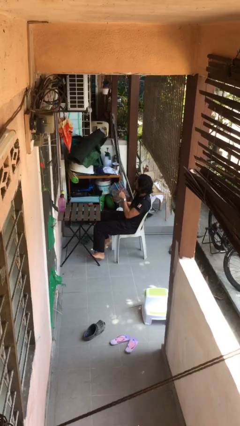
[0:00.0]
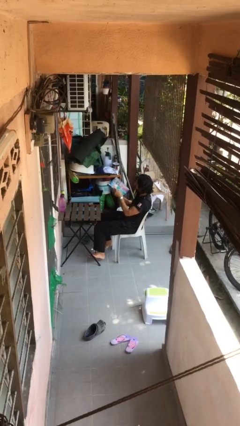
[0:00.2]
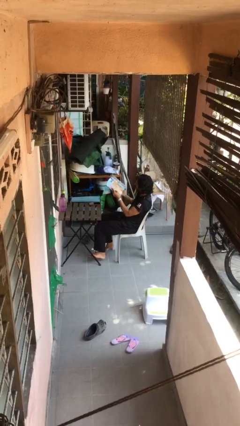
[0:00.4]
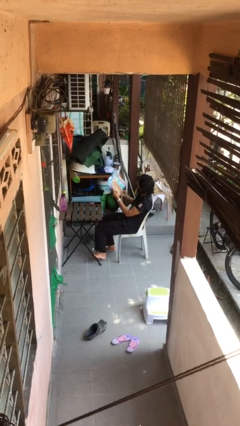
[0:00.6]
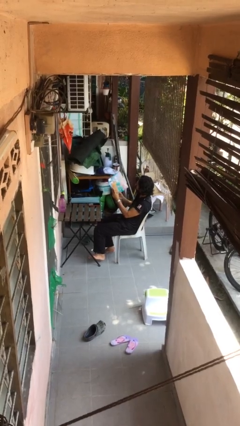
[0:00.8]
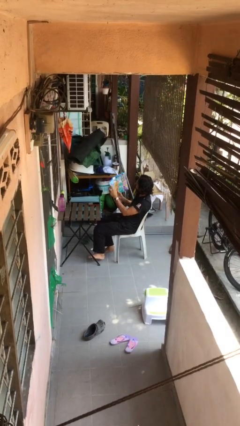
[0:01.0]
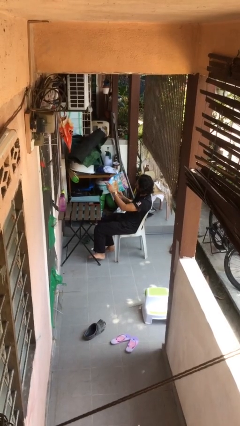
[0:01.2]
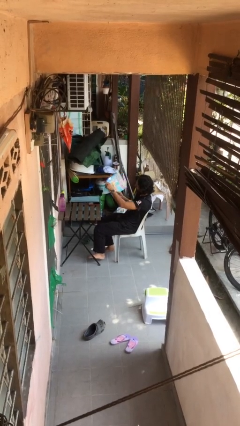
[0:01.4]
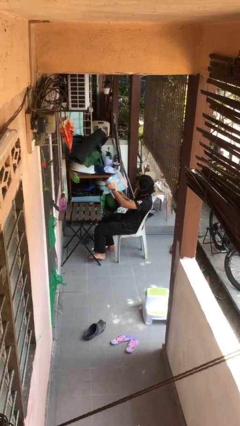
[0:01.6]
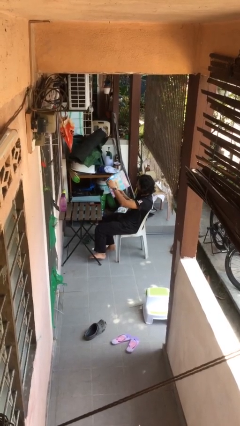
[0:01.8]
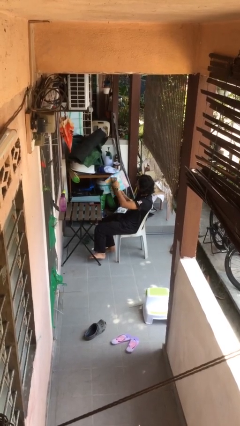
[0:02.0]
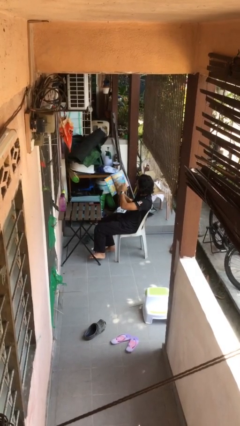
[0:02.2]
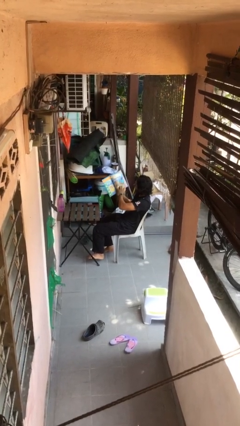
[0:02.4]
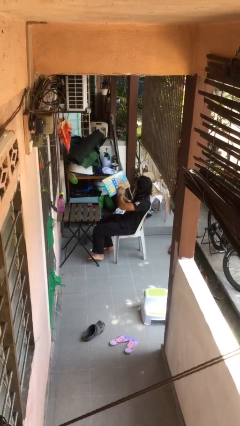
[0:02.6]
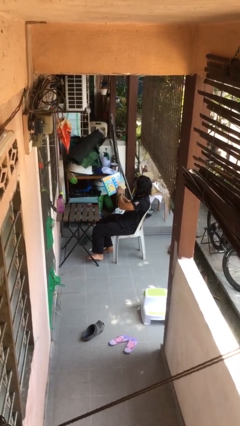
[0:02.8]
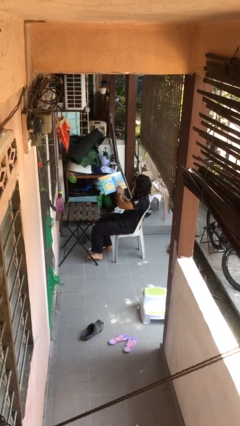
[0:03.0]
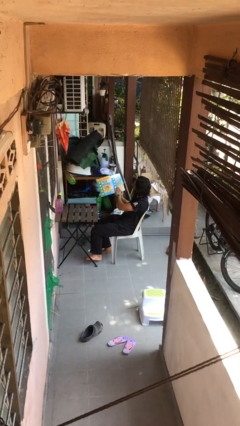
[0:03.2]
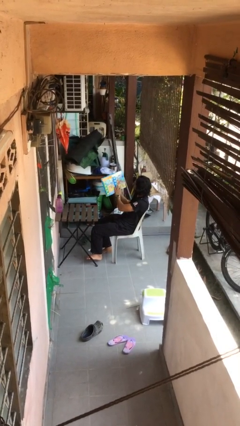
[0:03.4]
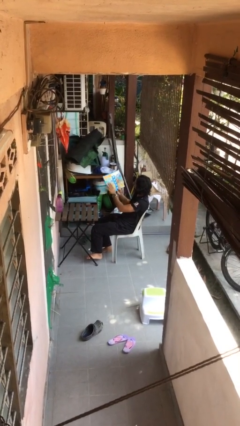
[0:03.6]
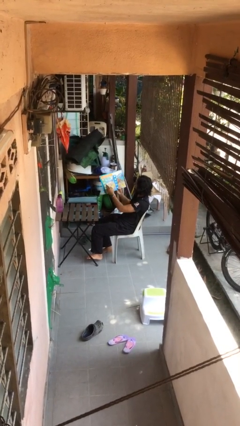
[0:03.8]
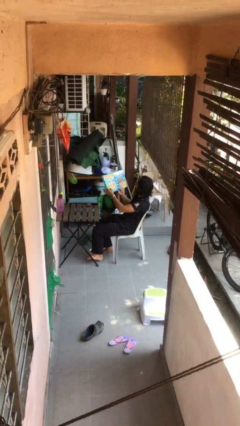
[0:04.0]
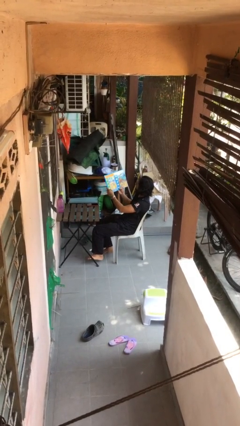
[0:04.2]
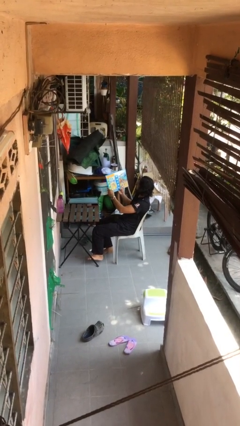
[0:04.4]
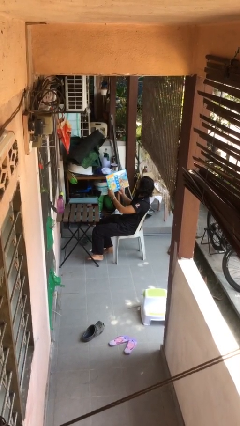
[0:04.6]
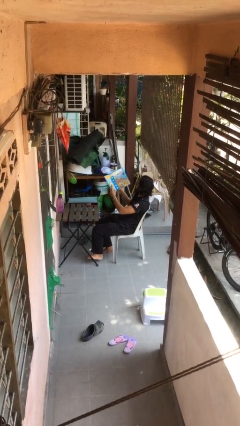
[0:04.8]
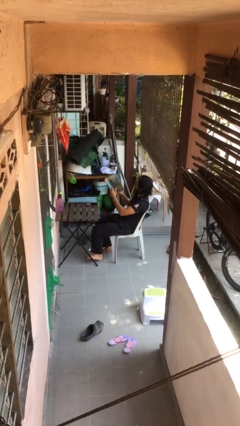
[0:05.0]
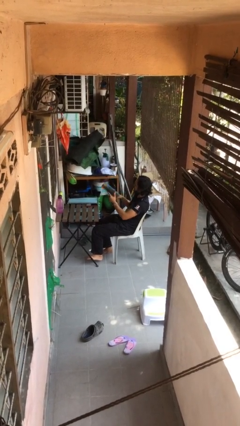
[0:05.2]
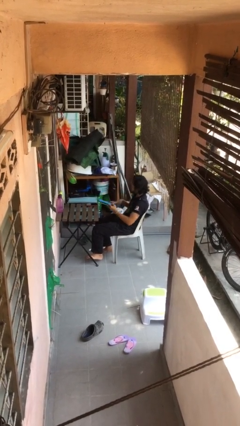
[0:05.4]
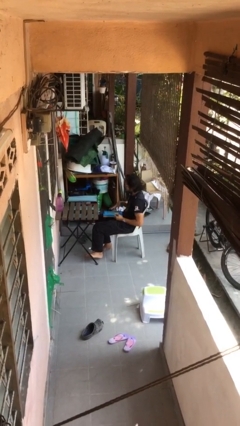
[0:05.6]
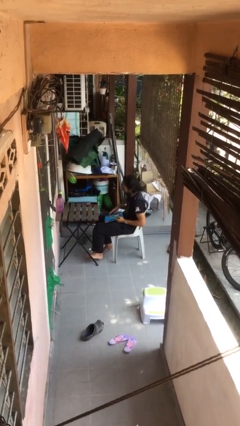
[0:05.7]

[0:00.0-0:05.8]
person reads document

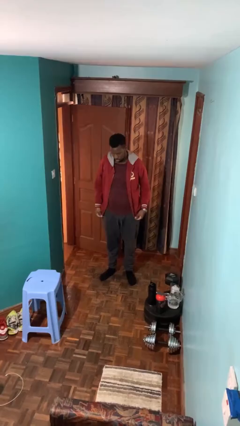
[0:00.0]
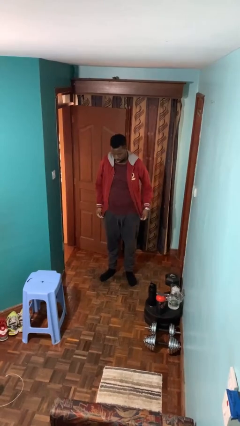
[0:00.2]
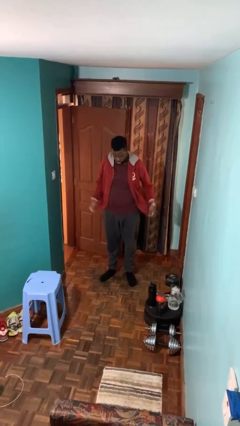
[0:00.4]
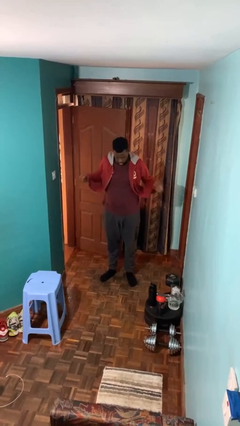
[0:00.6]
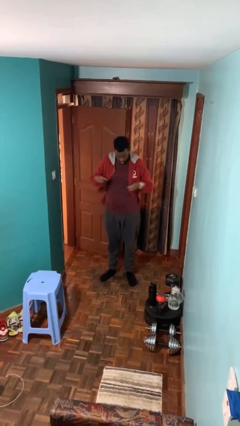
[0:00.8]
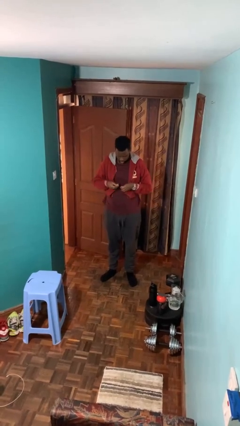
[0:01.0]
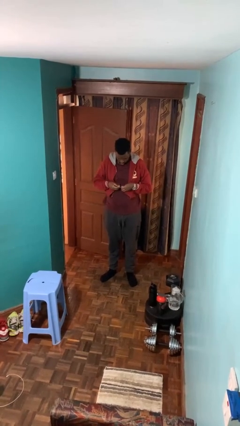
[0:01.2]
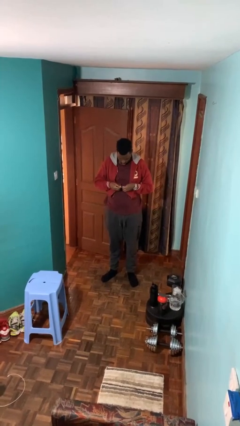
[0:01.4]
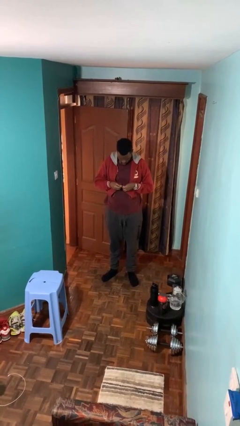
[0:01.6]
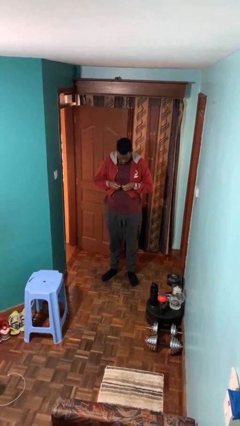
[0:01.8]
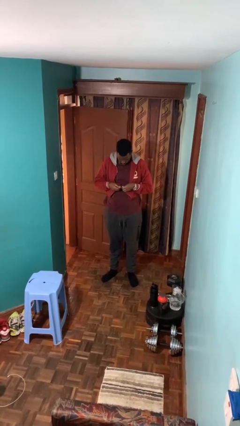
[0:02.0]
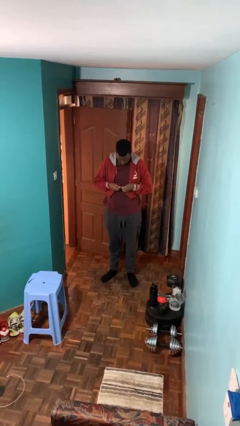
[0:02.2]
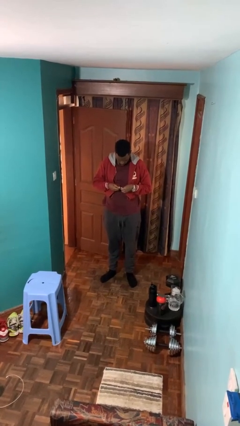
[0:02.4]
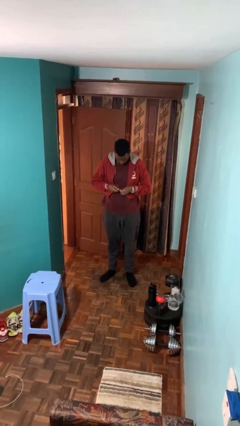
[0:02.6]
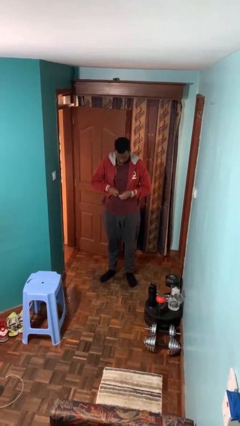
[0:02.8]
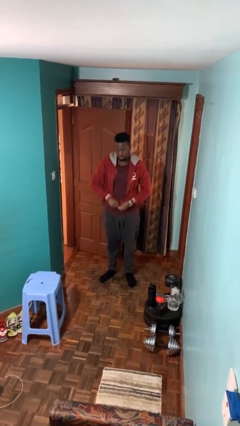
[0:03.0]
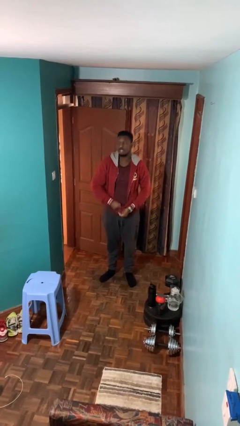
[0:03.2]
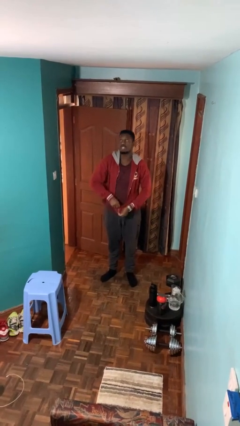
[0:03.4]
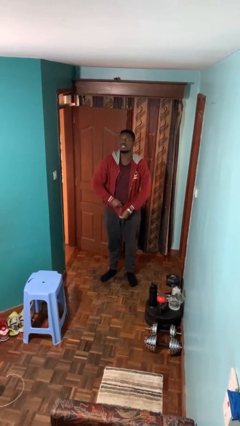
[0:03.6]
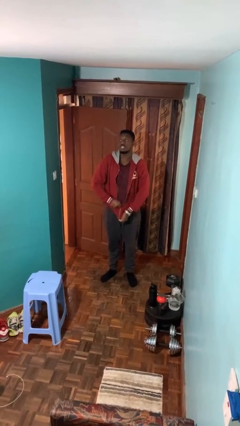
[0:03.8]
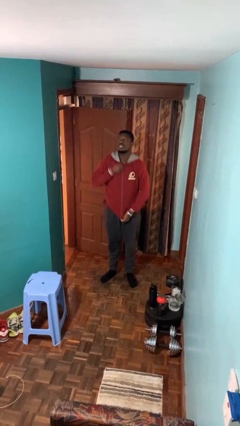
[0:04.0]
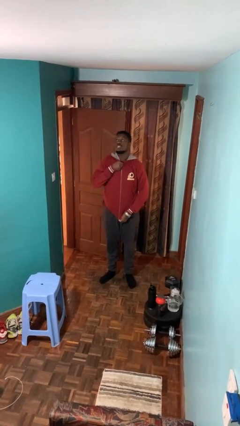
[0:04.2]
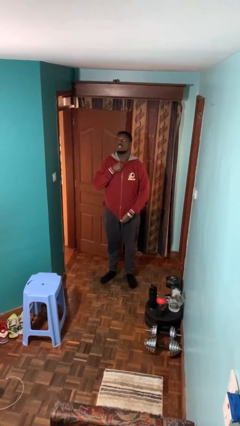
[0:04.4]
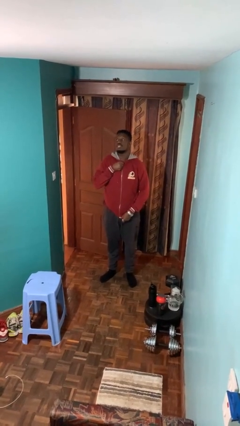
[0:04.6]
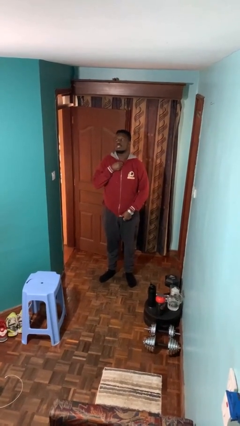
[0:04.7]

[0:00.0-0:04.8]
person zips up jacket

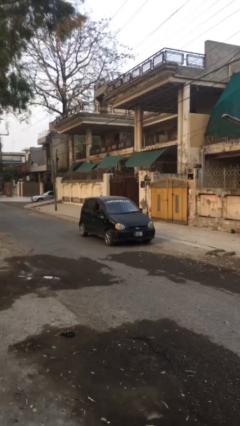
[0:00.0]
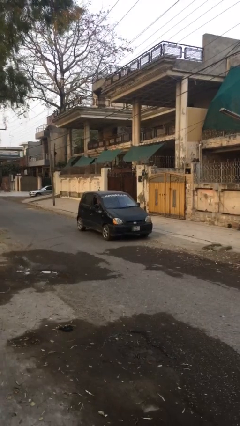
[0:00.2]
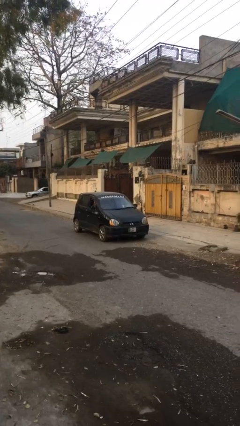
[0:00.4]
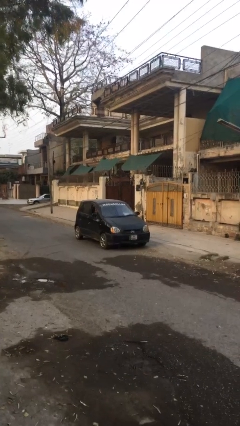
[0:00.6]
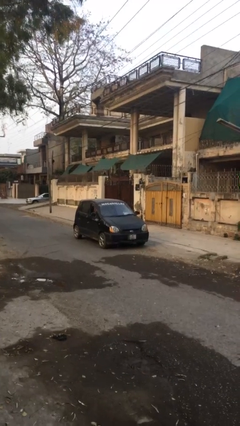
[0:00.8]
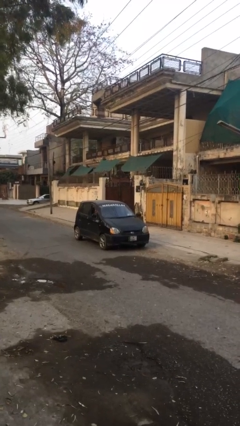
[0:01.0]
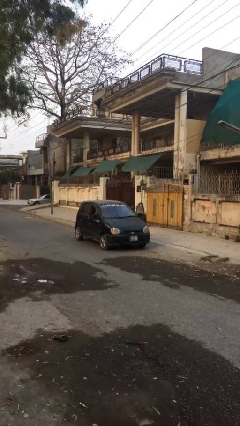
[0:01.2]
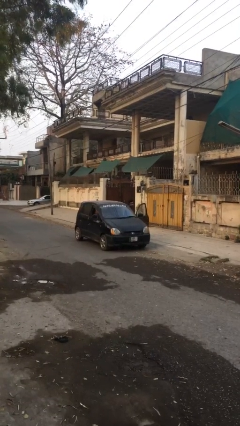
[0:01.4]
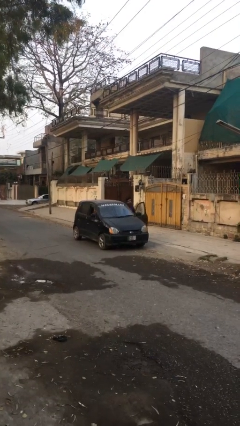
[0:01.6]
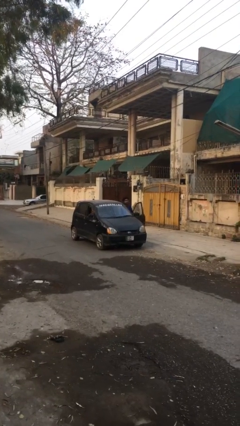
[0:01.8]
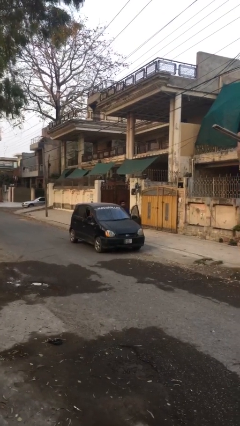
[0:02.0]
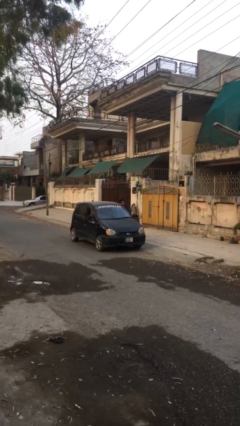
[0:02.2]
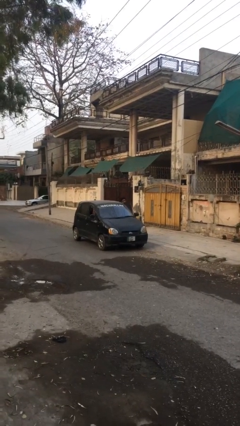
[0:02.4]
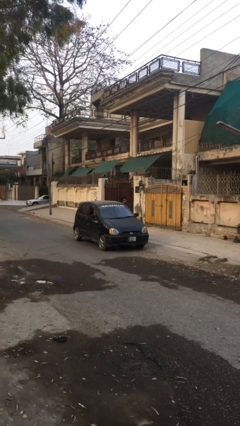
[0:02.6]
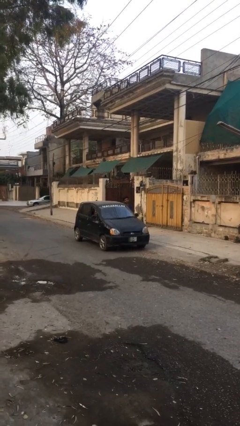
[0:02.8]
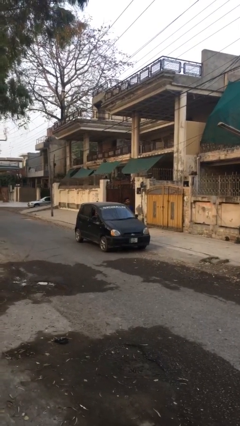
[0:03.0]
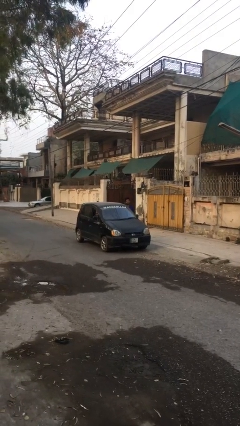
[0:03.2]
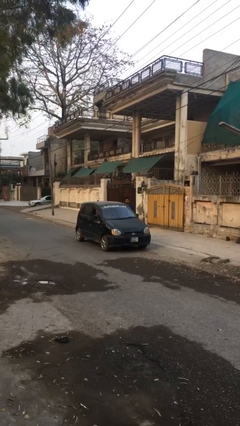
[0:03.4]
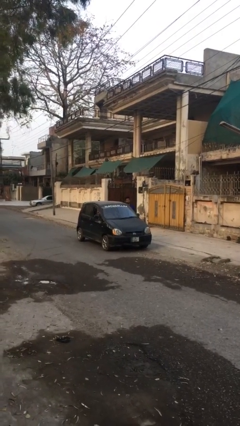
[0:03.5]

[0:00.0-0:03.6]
car drops off person

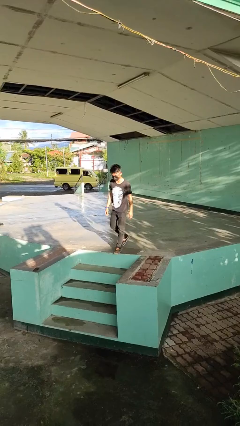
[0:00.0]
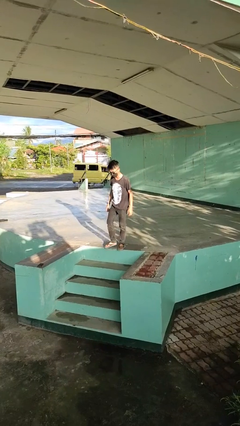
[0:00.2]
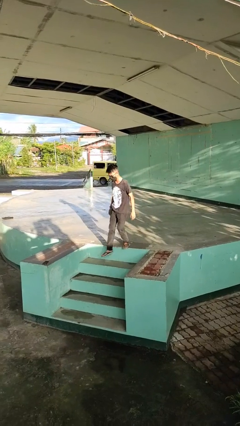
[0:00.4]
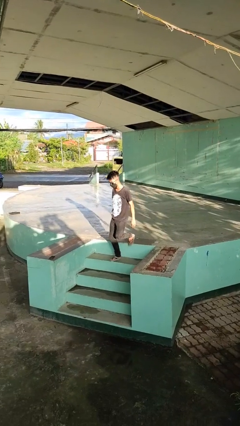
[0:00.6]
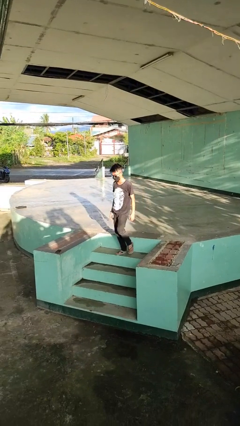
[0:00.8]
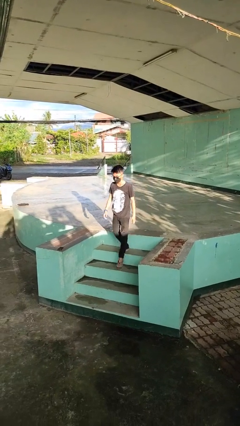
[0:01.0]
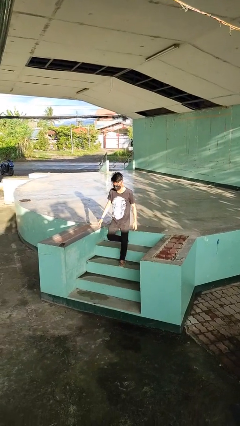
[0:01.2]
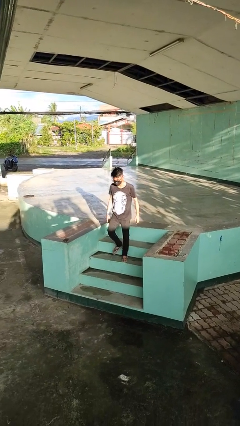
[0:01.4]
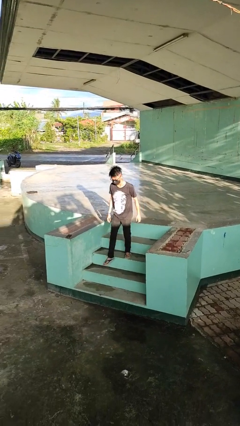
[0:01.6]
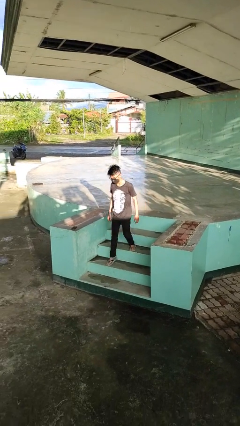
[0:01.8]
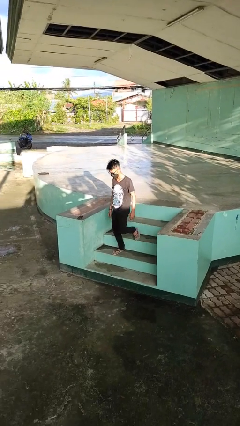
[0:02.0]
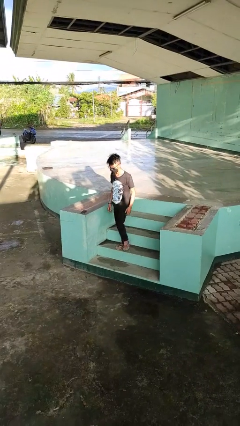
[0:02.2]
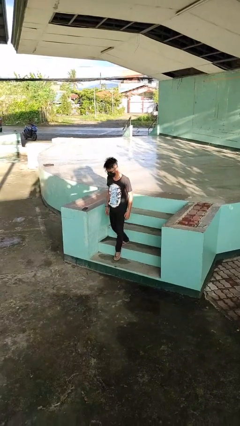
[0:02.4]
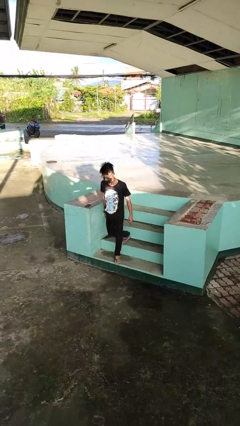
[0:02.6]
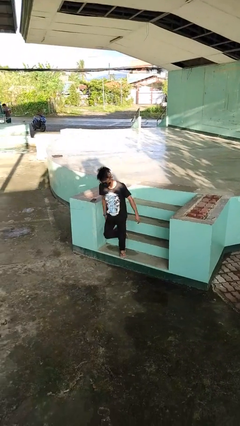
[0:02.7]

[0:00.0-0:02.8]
person climbs down stairs

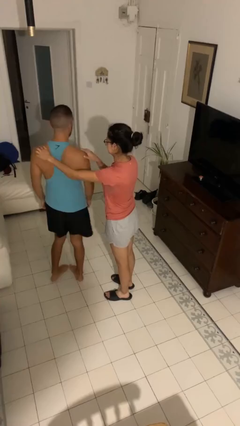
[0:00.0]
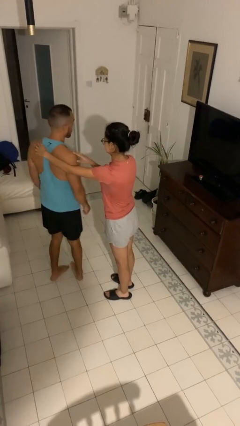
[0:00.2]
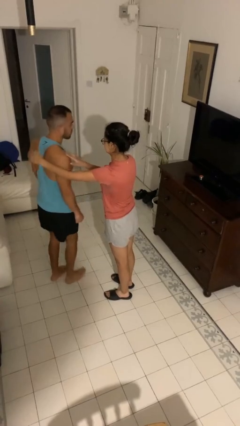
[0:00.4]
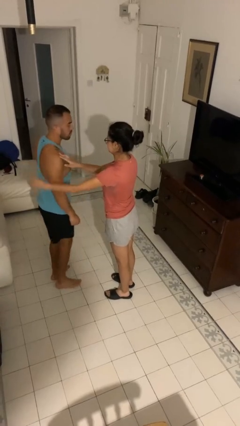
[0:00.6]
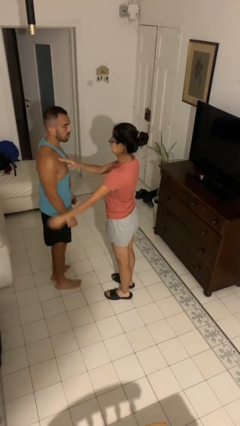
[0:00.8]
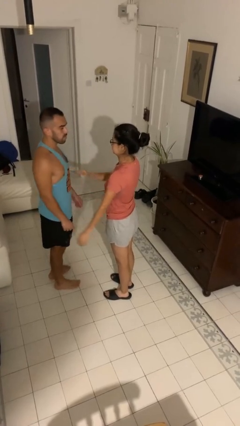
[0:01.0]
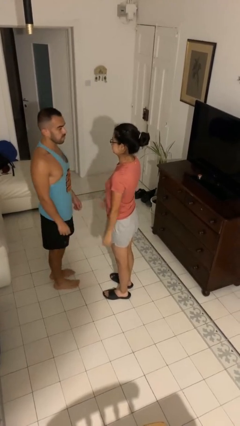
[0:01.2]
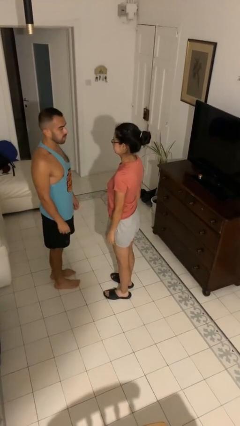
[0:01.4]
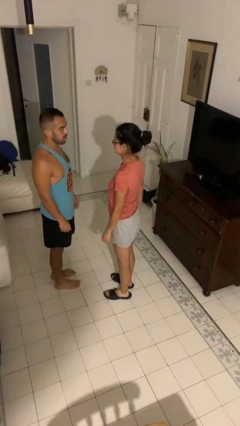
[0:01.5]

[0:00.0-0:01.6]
person spins person around
